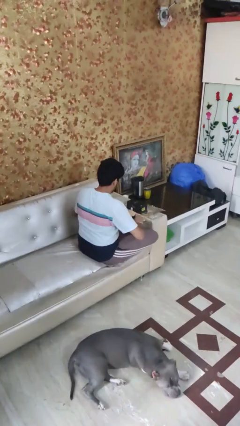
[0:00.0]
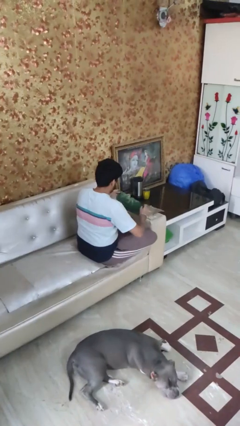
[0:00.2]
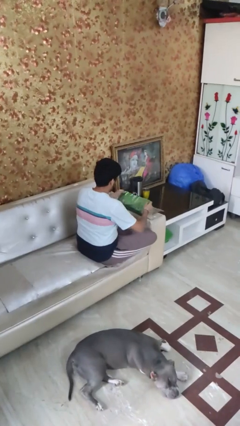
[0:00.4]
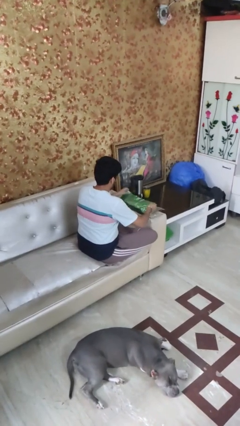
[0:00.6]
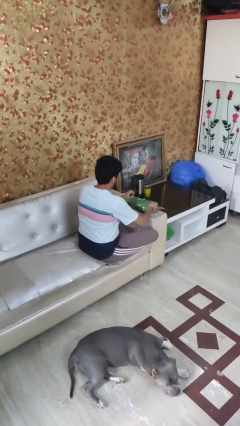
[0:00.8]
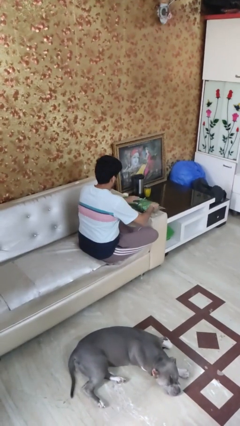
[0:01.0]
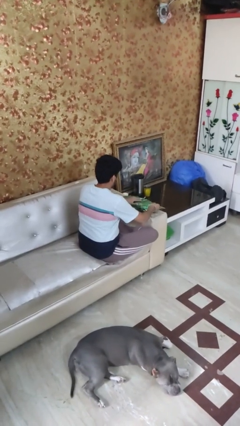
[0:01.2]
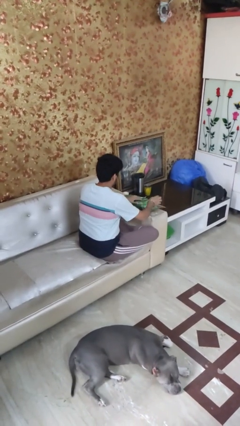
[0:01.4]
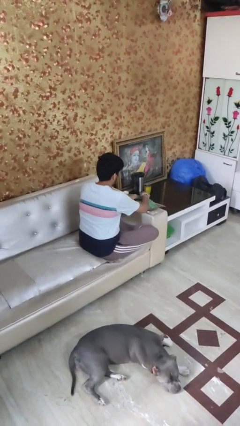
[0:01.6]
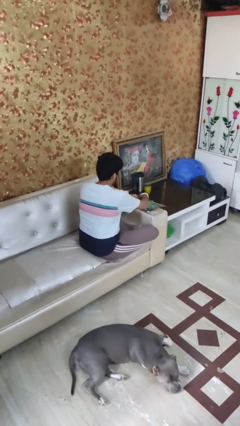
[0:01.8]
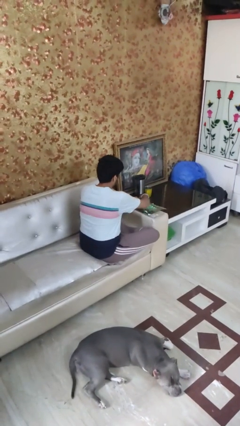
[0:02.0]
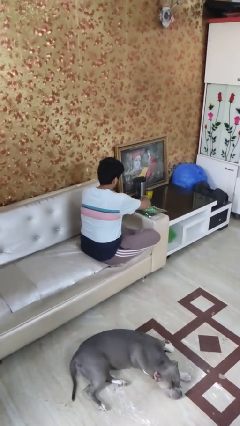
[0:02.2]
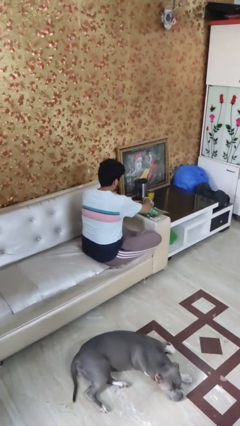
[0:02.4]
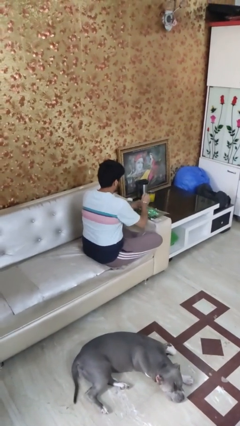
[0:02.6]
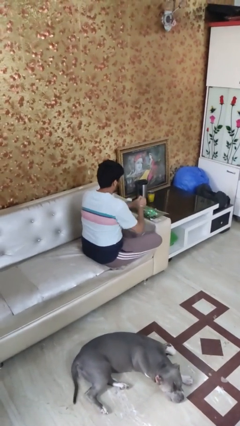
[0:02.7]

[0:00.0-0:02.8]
person wraps box

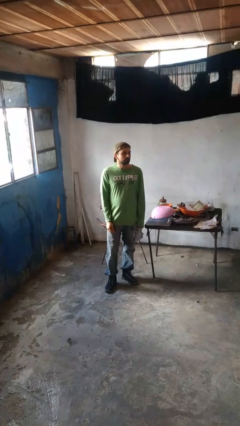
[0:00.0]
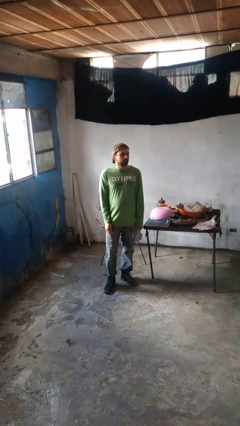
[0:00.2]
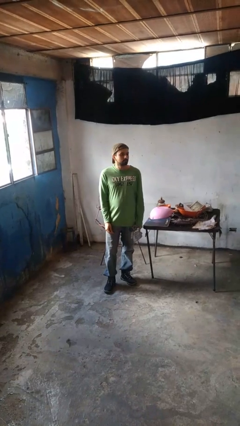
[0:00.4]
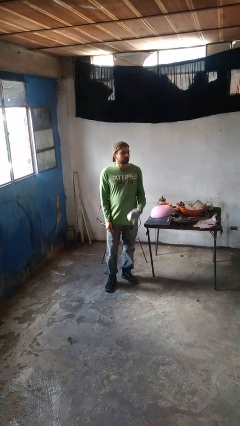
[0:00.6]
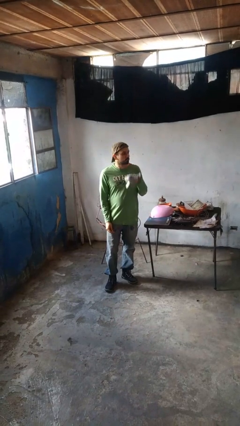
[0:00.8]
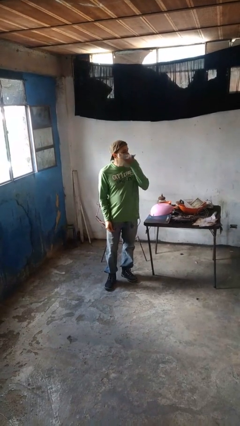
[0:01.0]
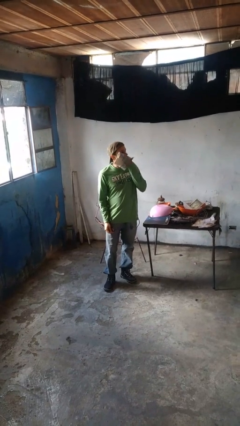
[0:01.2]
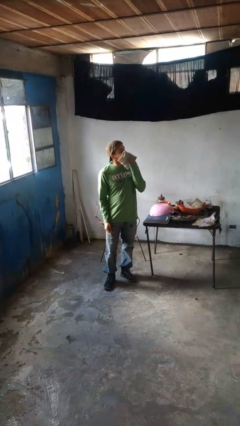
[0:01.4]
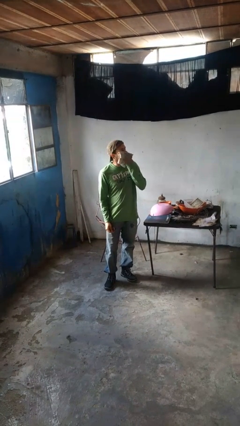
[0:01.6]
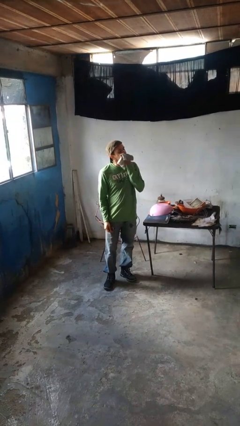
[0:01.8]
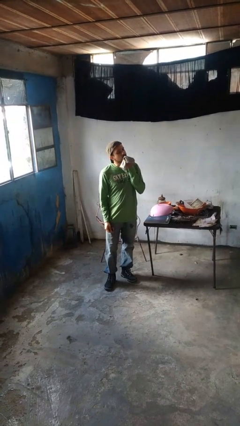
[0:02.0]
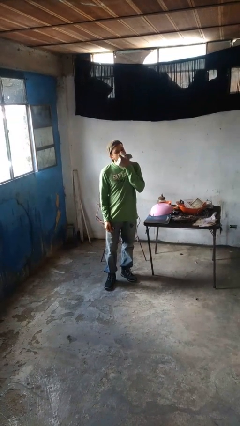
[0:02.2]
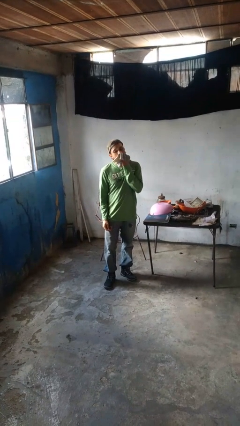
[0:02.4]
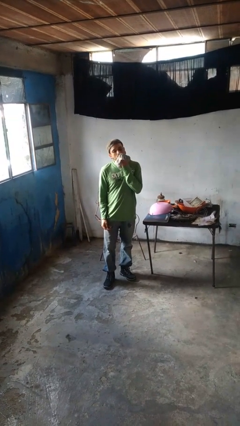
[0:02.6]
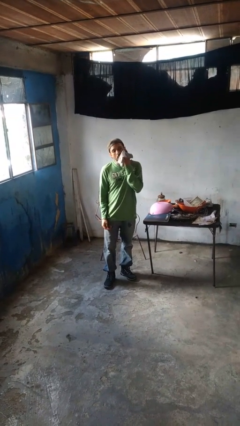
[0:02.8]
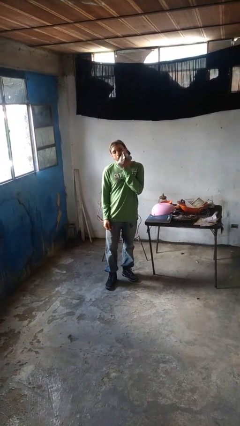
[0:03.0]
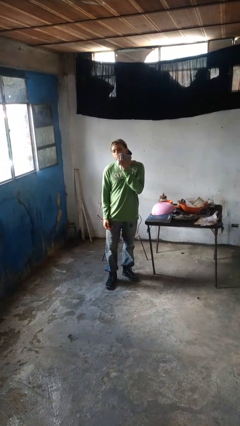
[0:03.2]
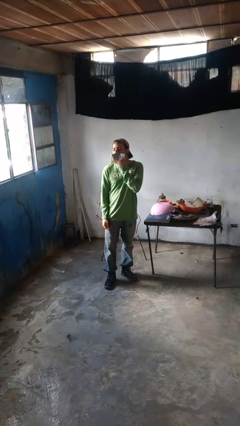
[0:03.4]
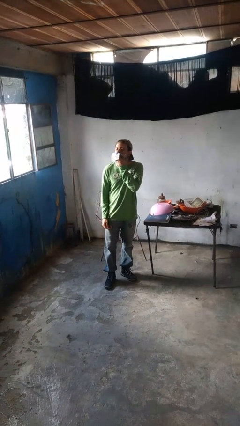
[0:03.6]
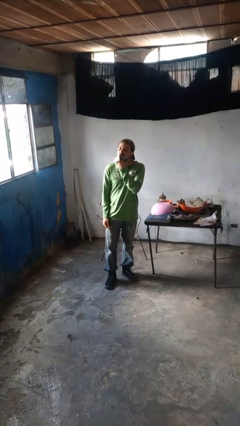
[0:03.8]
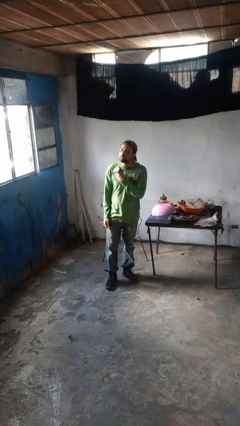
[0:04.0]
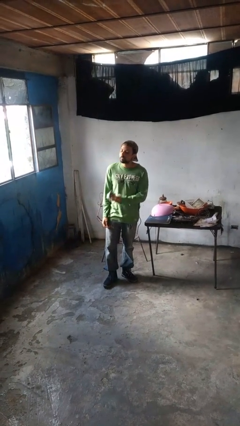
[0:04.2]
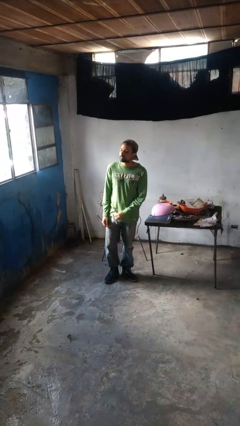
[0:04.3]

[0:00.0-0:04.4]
person wipes mouth with napkin

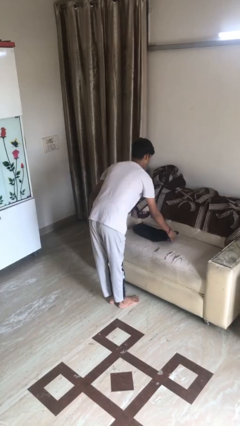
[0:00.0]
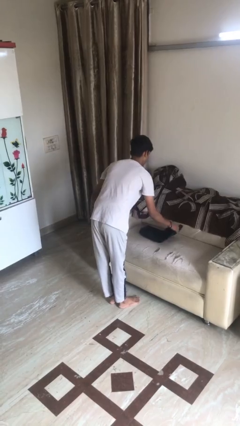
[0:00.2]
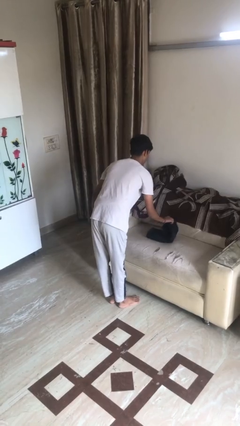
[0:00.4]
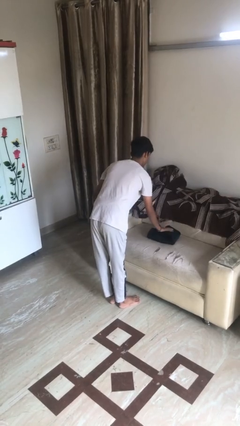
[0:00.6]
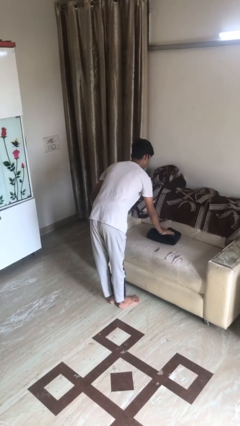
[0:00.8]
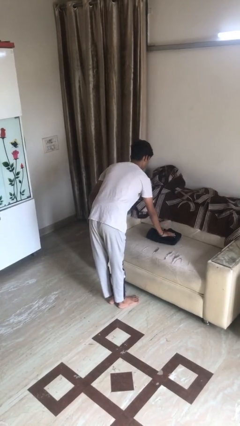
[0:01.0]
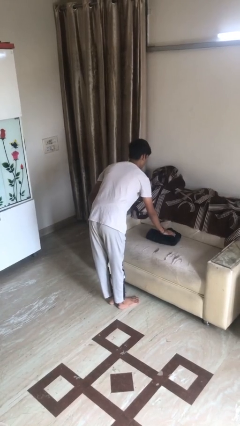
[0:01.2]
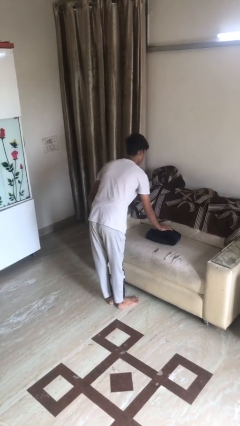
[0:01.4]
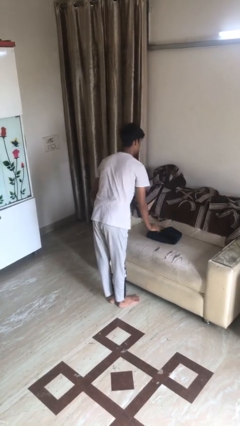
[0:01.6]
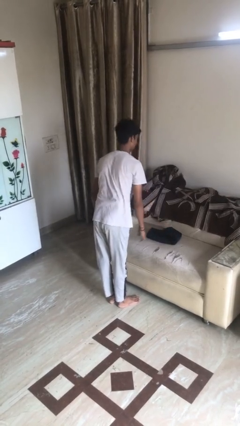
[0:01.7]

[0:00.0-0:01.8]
person folds pants

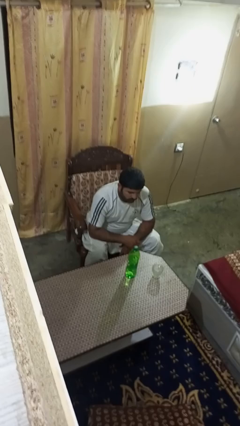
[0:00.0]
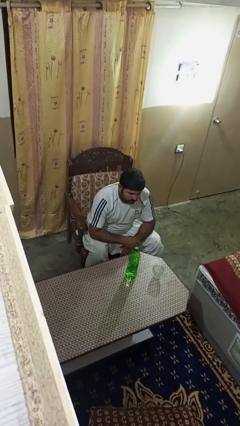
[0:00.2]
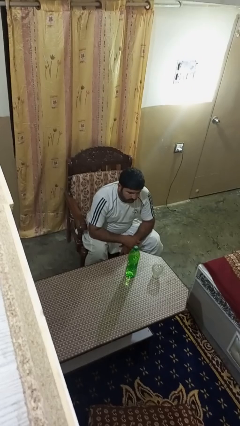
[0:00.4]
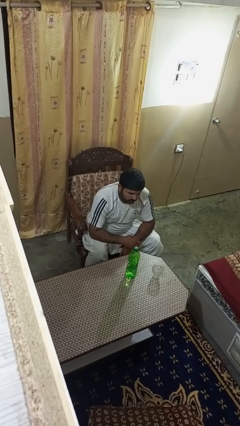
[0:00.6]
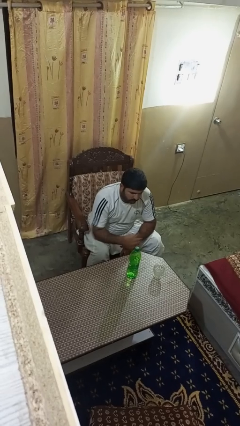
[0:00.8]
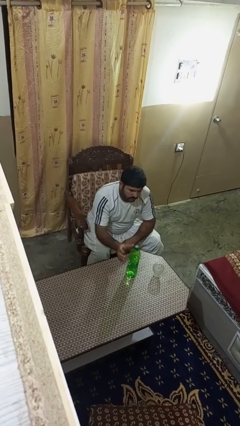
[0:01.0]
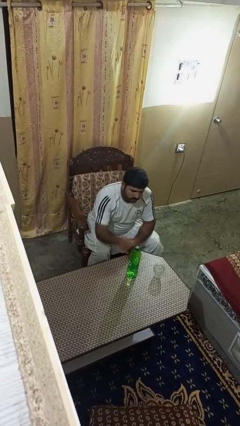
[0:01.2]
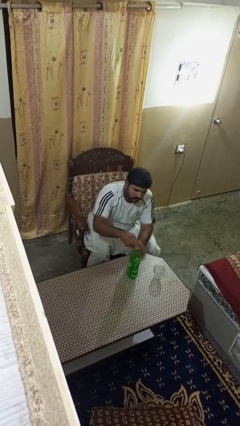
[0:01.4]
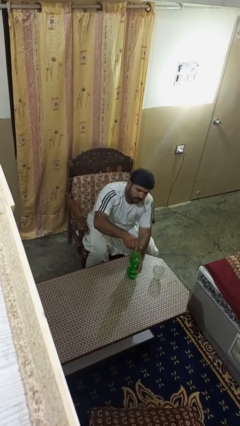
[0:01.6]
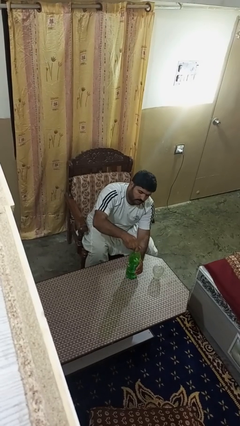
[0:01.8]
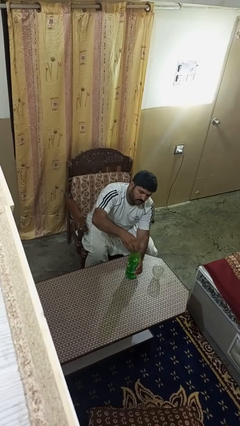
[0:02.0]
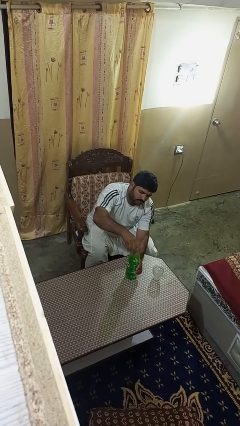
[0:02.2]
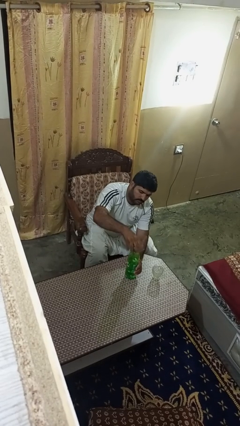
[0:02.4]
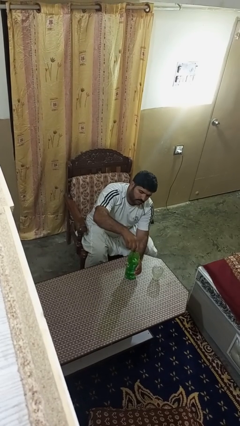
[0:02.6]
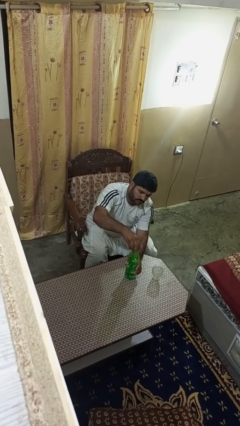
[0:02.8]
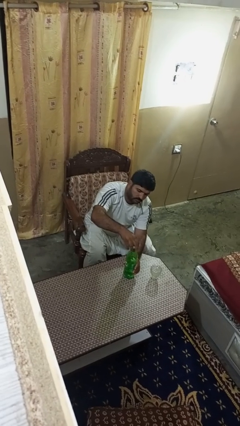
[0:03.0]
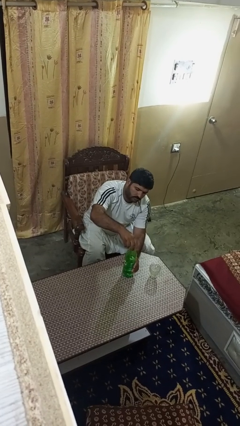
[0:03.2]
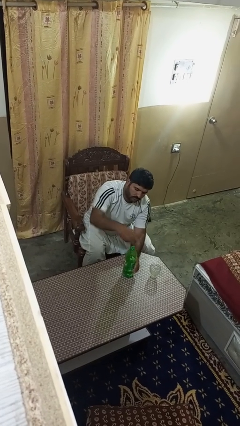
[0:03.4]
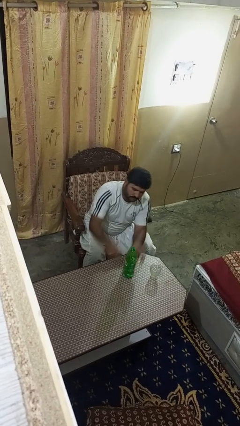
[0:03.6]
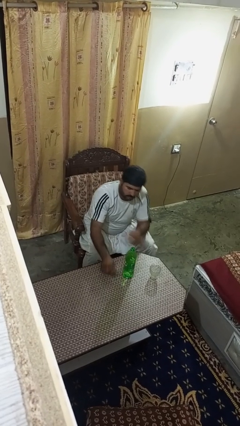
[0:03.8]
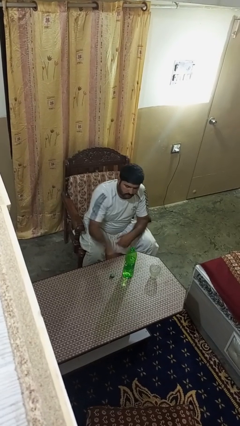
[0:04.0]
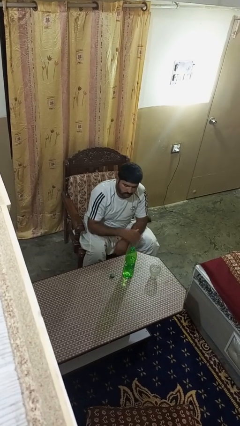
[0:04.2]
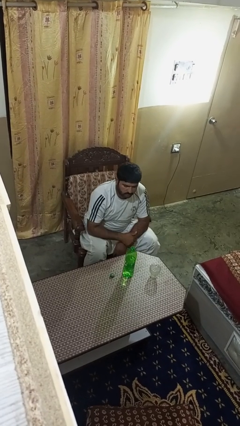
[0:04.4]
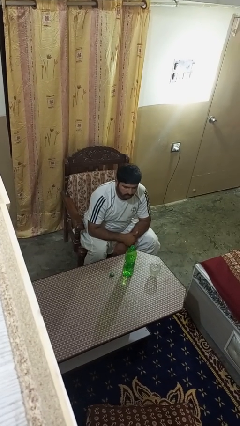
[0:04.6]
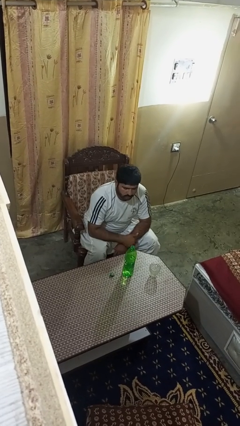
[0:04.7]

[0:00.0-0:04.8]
person unscrews lid from bottle

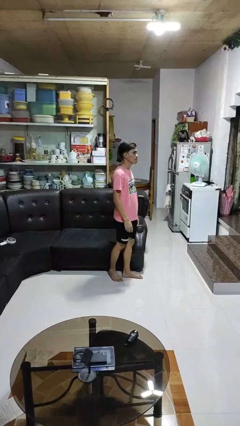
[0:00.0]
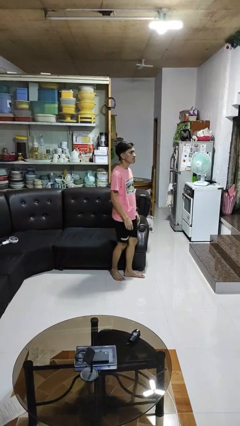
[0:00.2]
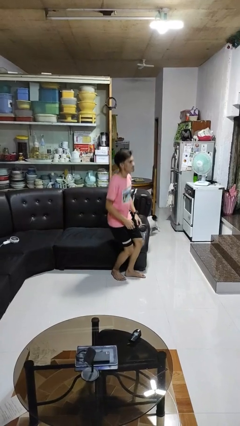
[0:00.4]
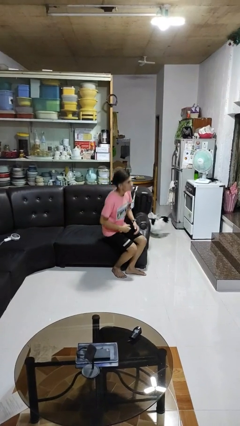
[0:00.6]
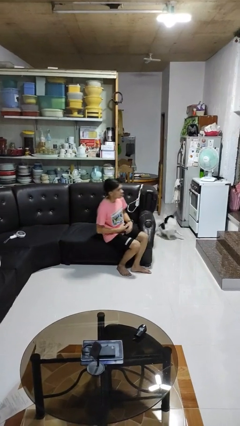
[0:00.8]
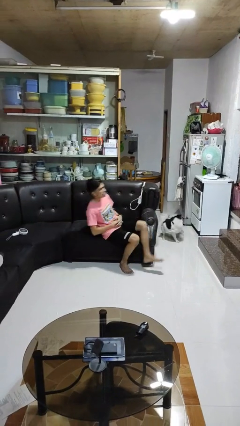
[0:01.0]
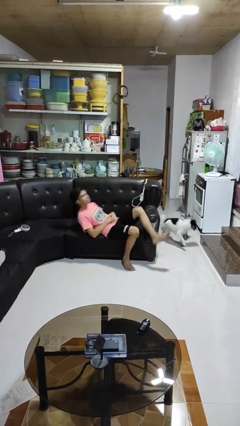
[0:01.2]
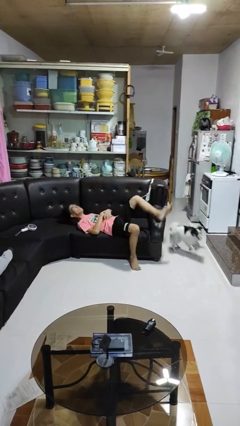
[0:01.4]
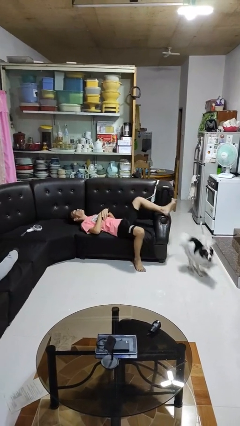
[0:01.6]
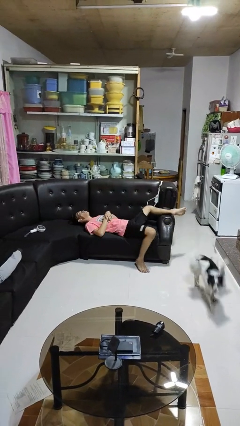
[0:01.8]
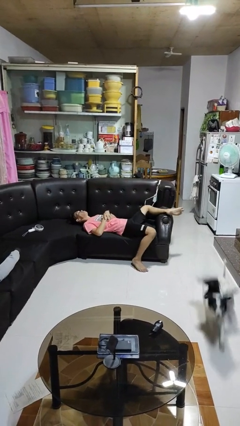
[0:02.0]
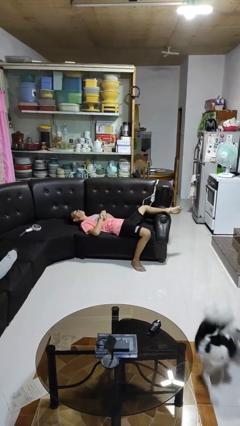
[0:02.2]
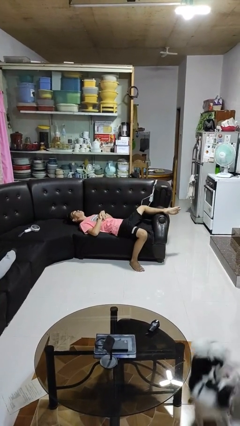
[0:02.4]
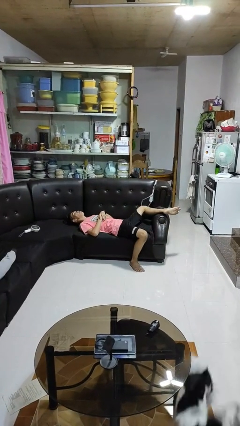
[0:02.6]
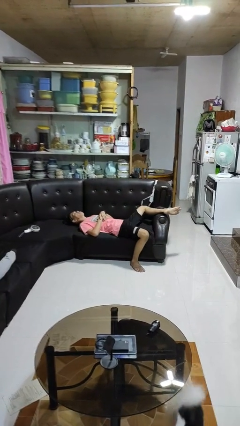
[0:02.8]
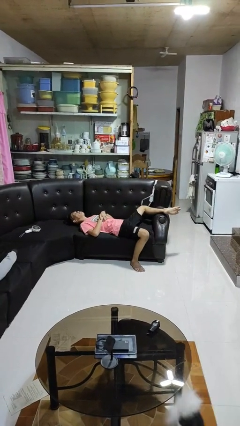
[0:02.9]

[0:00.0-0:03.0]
person lies down on couch

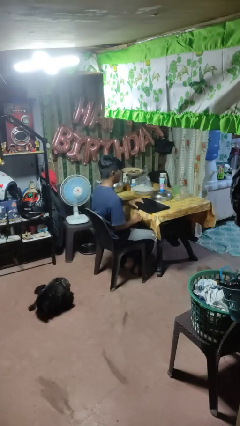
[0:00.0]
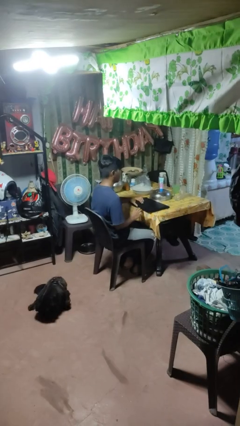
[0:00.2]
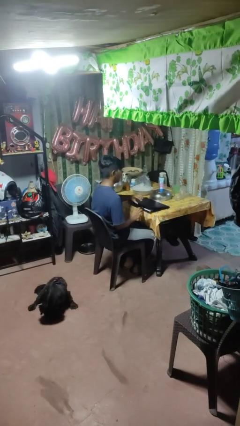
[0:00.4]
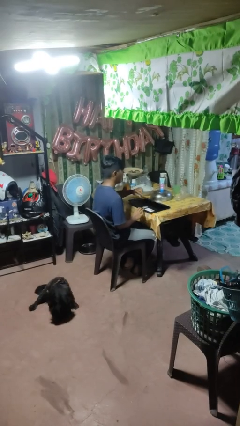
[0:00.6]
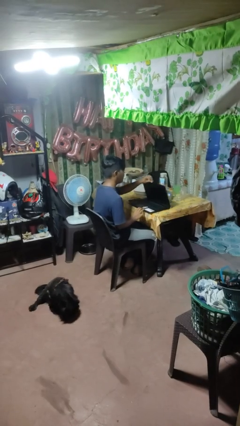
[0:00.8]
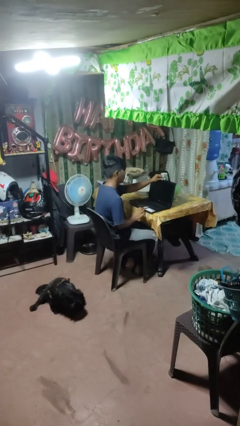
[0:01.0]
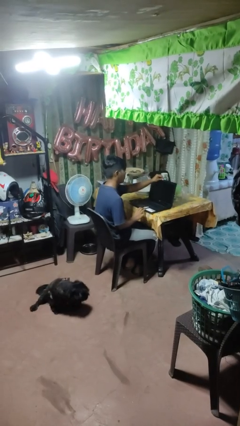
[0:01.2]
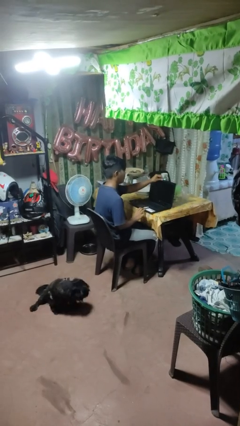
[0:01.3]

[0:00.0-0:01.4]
person opens laptop
